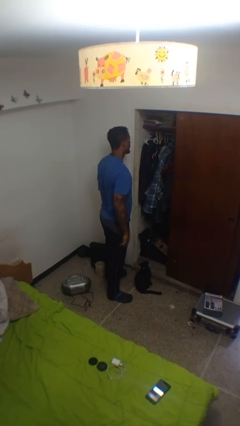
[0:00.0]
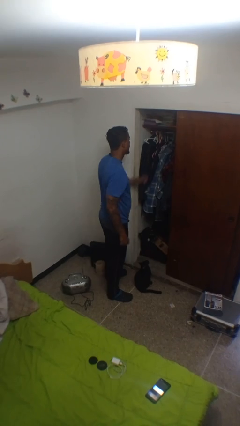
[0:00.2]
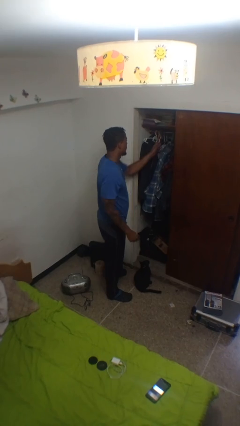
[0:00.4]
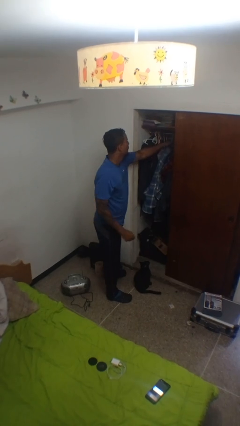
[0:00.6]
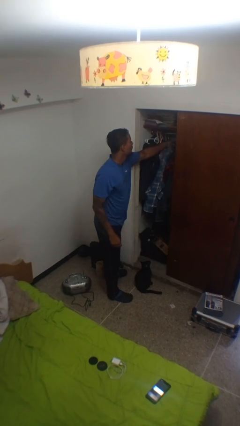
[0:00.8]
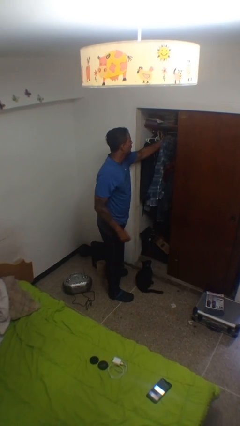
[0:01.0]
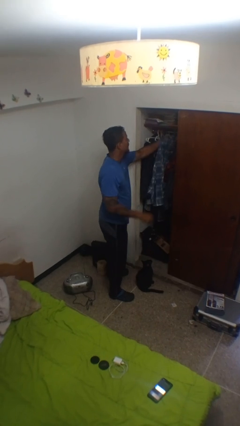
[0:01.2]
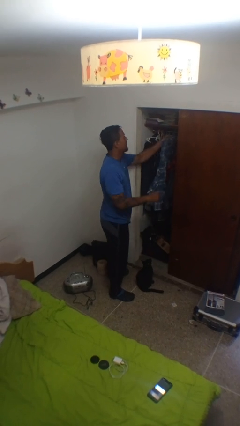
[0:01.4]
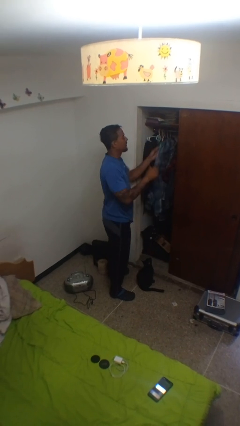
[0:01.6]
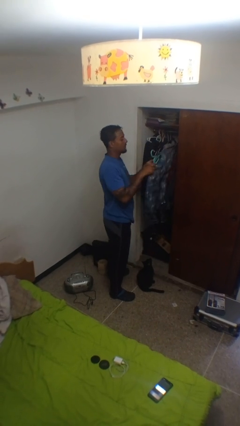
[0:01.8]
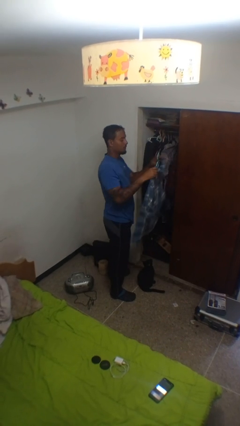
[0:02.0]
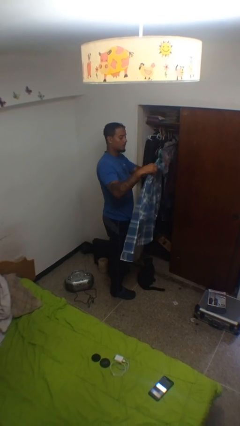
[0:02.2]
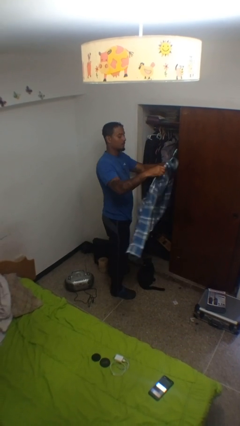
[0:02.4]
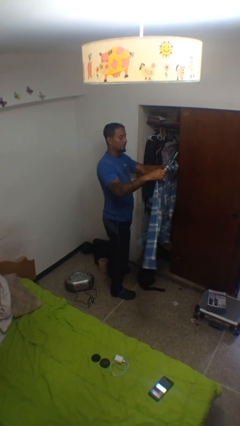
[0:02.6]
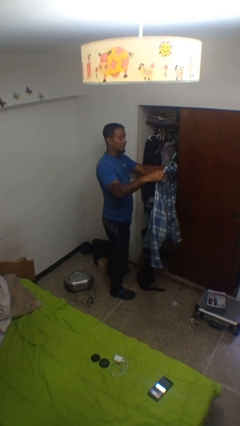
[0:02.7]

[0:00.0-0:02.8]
person takes clothes from closet

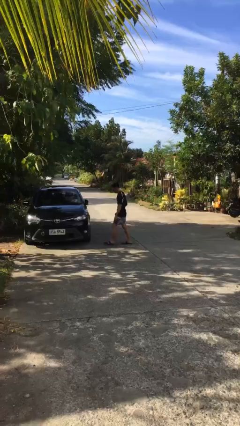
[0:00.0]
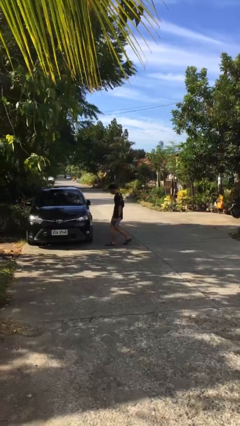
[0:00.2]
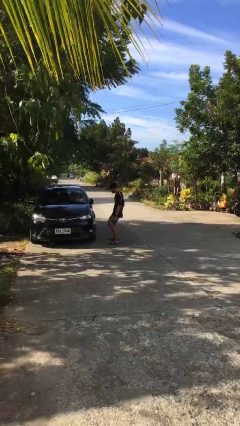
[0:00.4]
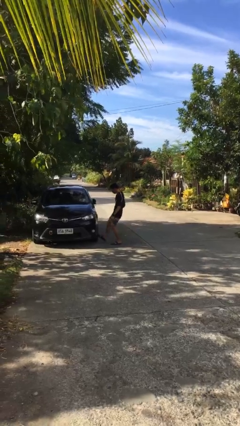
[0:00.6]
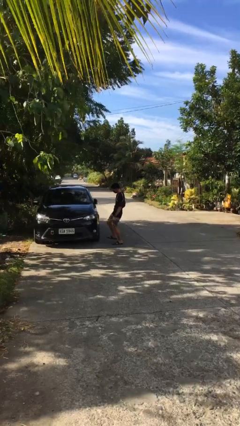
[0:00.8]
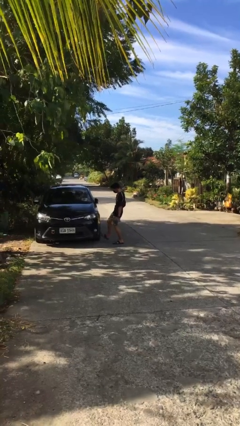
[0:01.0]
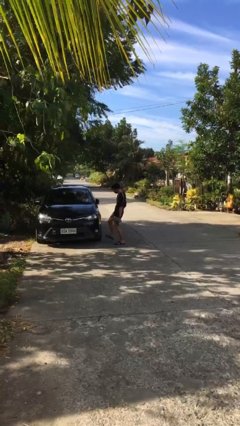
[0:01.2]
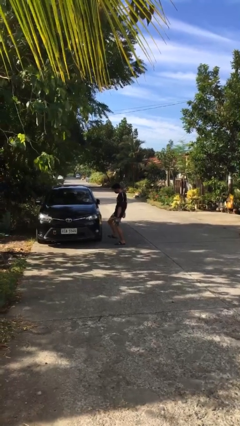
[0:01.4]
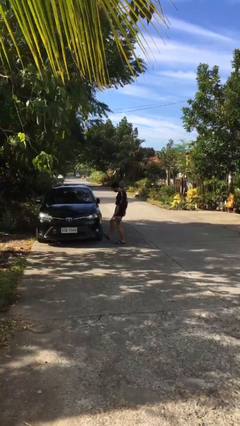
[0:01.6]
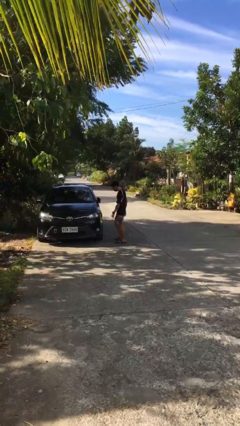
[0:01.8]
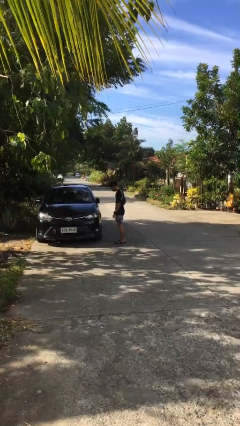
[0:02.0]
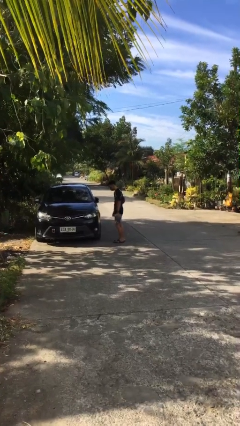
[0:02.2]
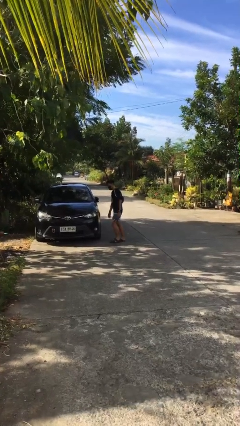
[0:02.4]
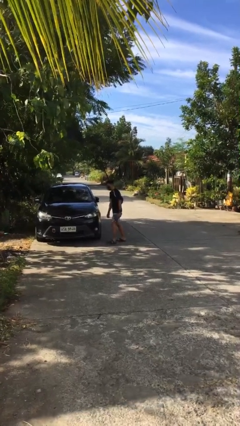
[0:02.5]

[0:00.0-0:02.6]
person kicks car tires

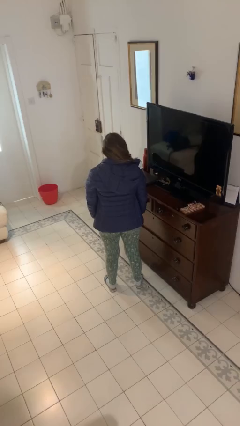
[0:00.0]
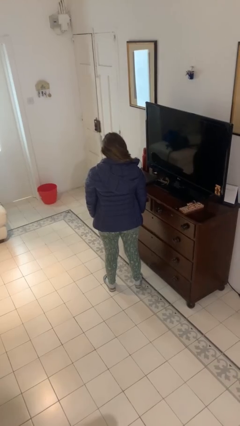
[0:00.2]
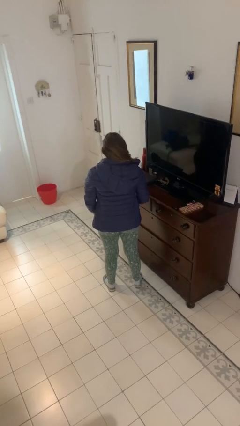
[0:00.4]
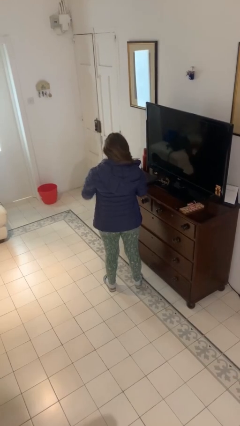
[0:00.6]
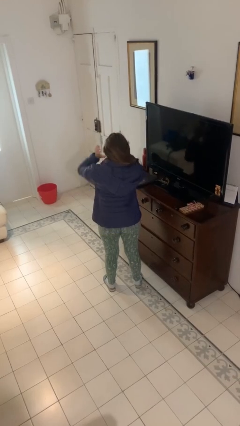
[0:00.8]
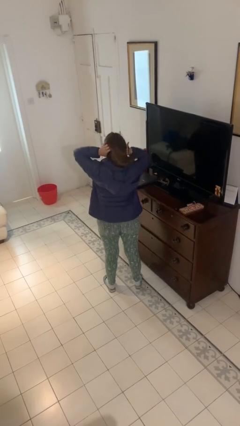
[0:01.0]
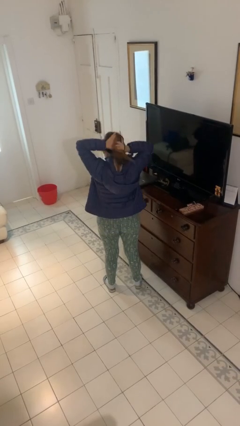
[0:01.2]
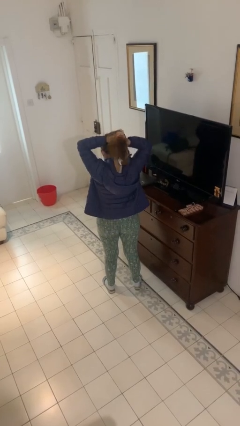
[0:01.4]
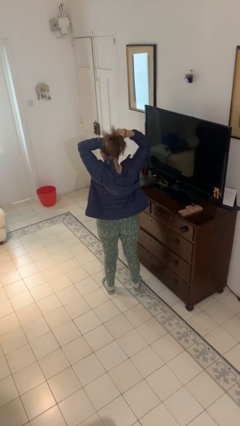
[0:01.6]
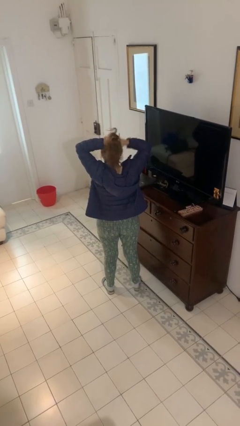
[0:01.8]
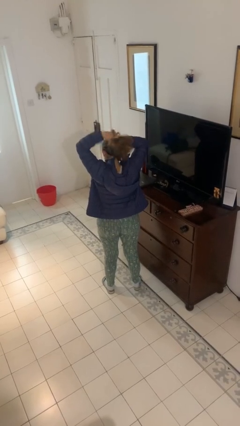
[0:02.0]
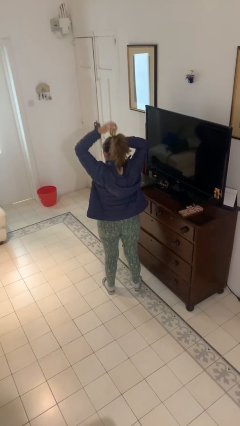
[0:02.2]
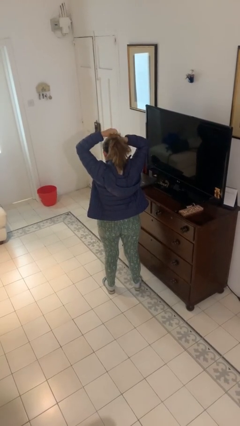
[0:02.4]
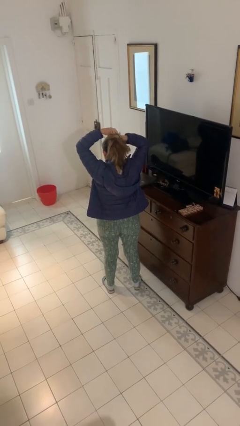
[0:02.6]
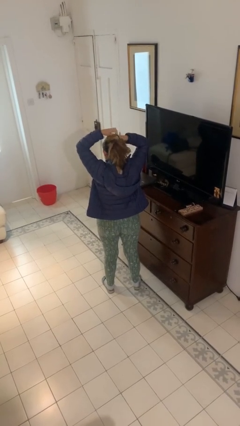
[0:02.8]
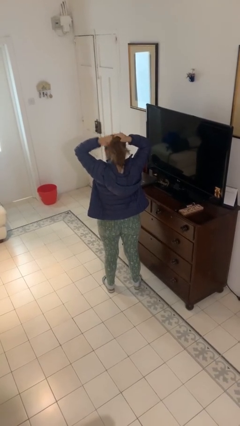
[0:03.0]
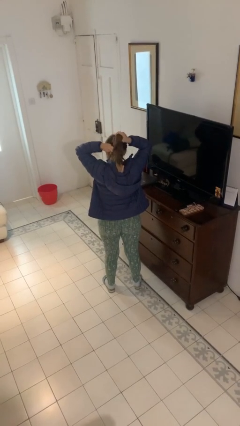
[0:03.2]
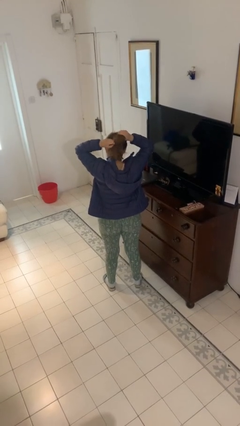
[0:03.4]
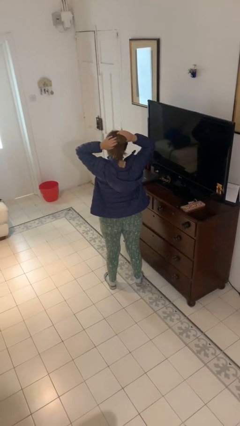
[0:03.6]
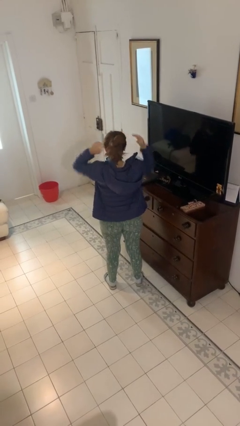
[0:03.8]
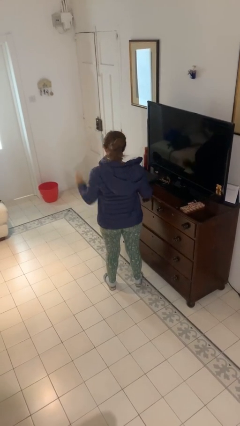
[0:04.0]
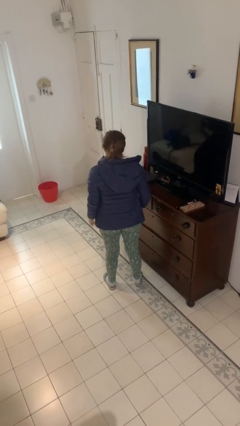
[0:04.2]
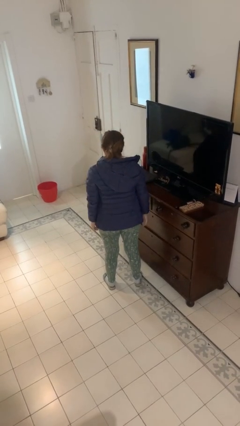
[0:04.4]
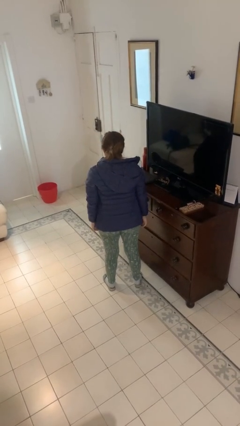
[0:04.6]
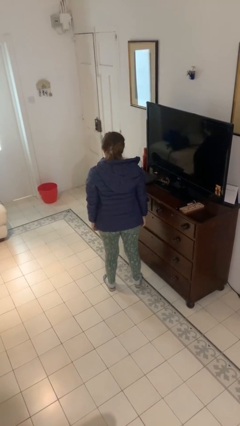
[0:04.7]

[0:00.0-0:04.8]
person puts hair in ponytail

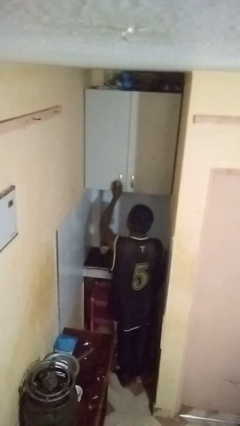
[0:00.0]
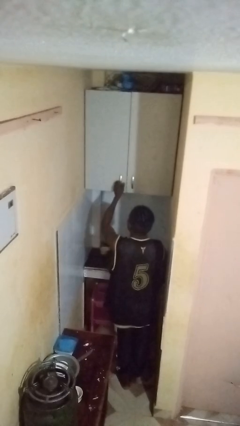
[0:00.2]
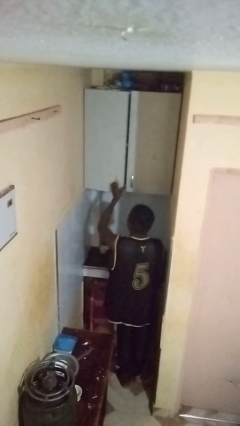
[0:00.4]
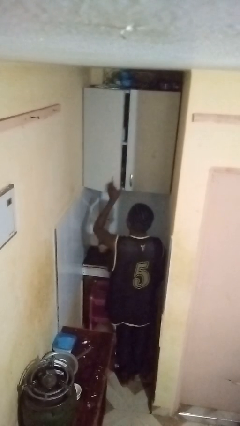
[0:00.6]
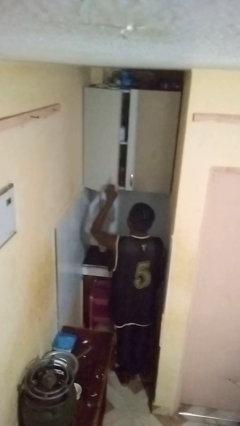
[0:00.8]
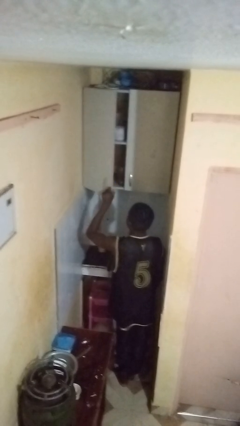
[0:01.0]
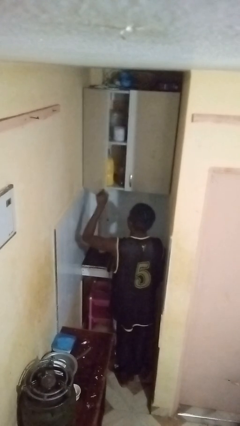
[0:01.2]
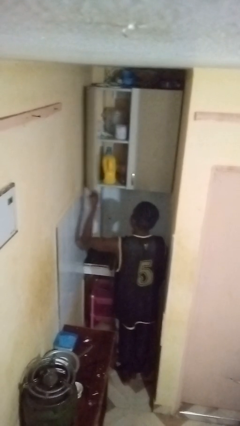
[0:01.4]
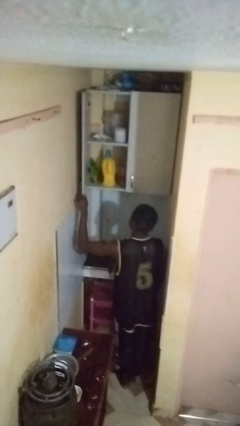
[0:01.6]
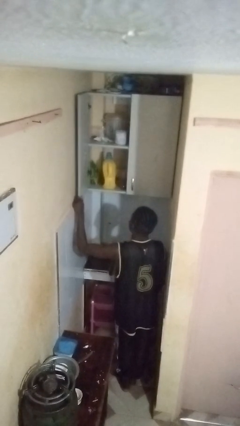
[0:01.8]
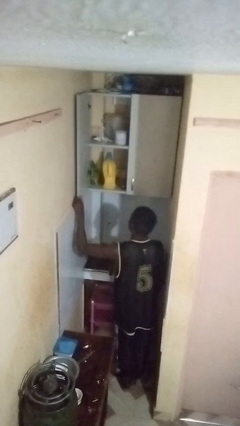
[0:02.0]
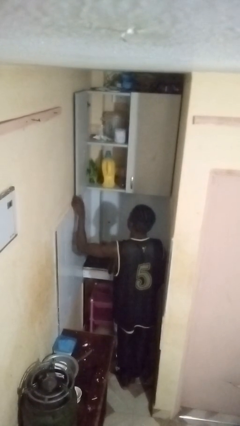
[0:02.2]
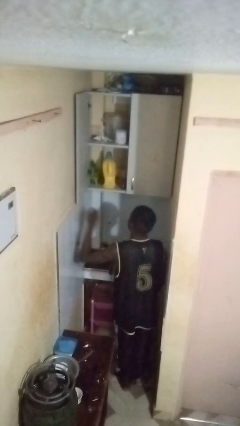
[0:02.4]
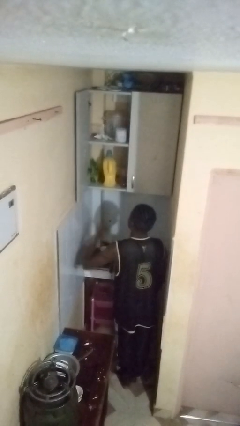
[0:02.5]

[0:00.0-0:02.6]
person opens cabinet

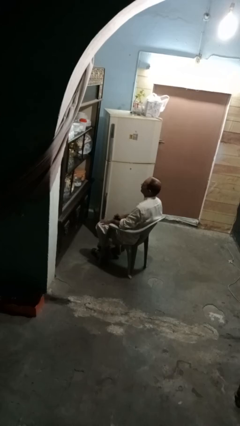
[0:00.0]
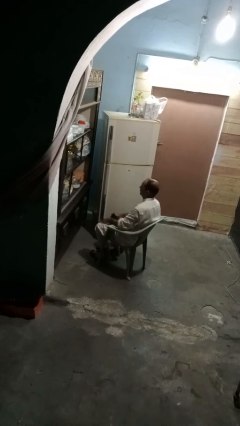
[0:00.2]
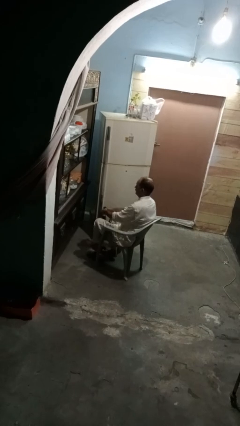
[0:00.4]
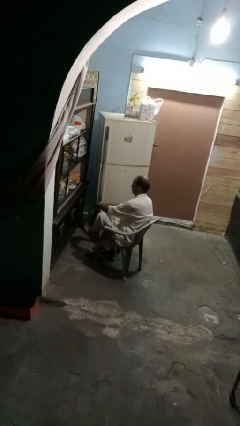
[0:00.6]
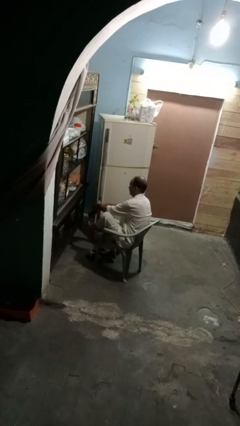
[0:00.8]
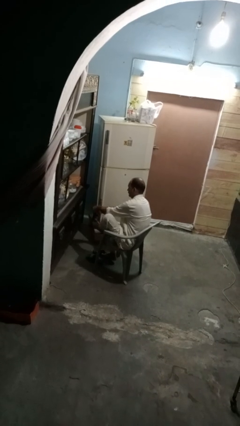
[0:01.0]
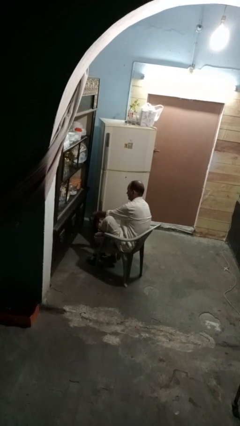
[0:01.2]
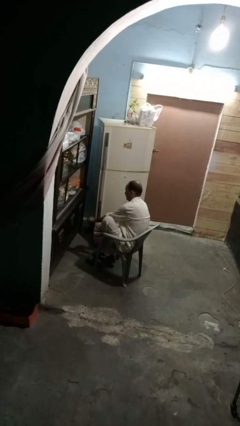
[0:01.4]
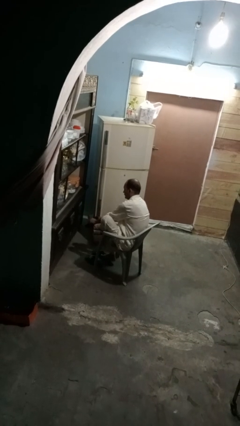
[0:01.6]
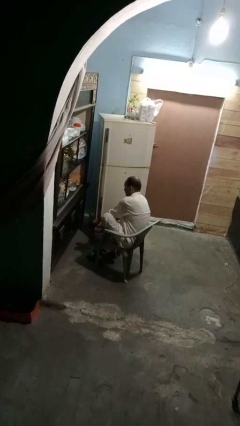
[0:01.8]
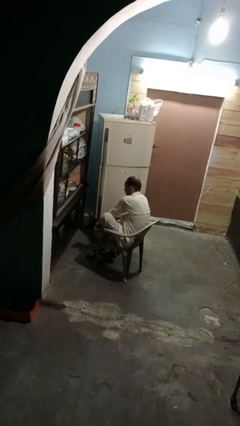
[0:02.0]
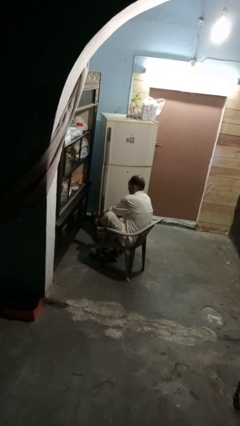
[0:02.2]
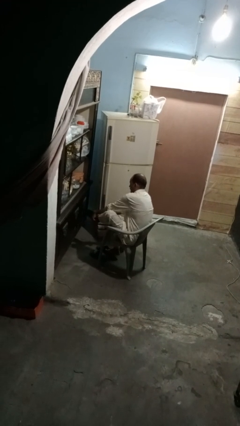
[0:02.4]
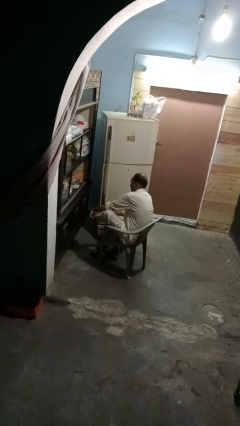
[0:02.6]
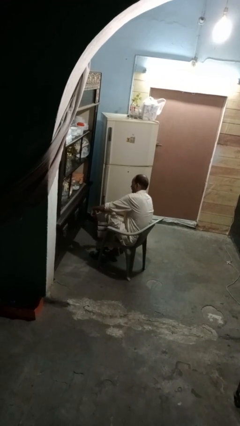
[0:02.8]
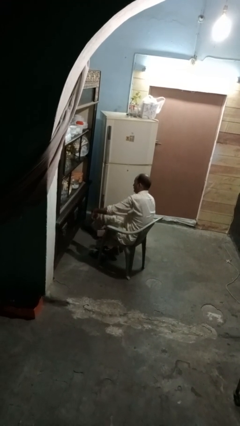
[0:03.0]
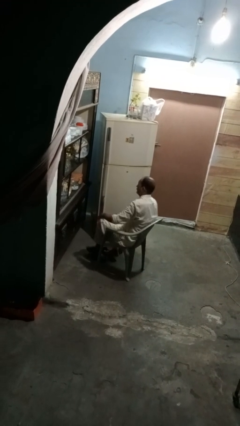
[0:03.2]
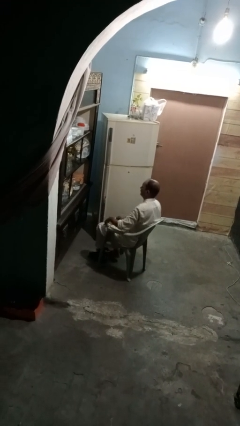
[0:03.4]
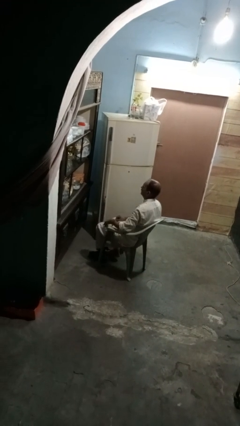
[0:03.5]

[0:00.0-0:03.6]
person puts on socks

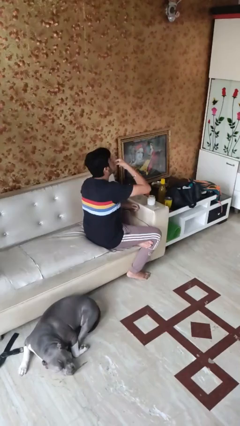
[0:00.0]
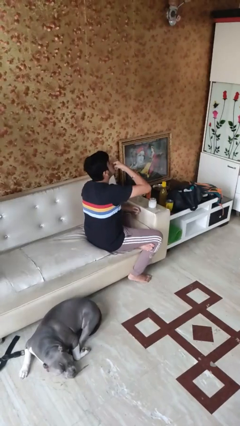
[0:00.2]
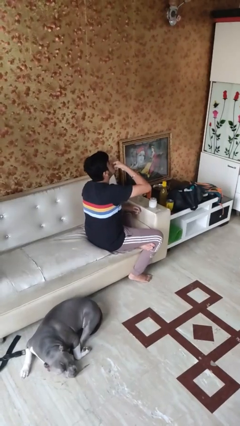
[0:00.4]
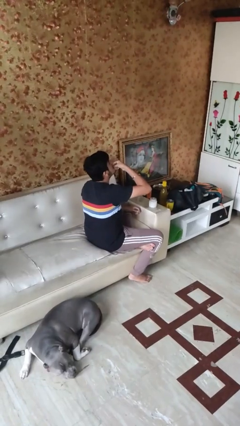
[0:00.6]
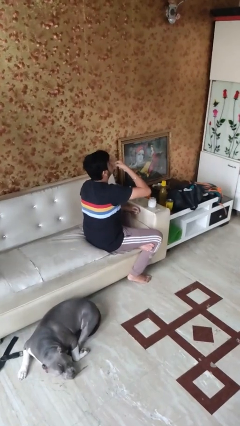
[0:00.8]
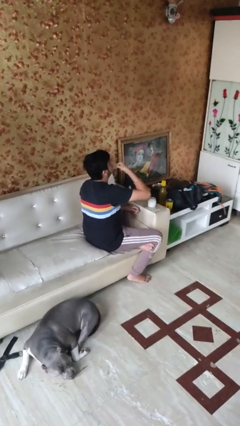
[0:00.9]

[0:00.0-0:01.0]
person takes medicine pills

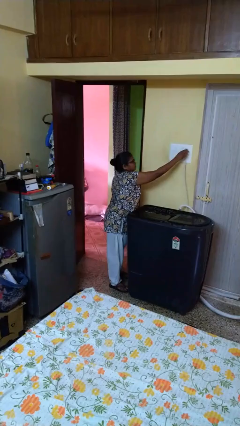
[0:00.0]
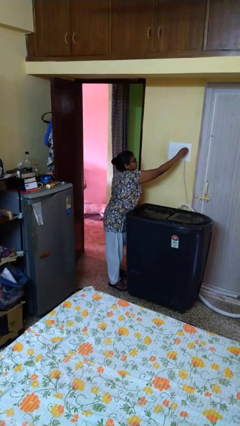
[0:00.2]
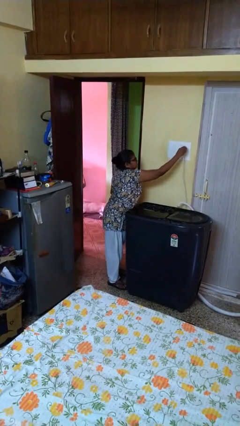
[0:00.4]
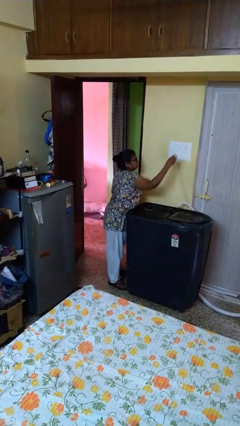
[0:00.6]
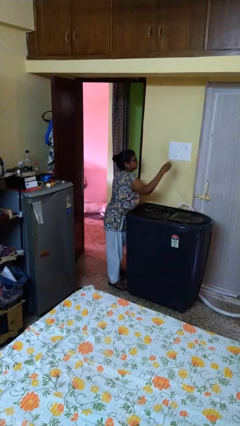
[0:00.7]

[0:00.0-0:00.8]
person unplugs from electrical socket
